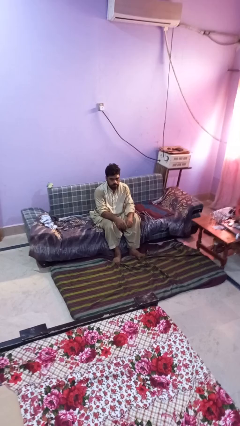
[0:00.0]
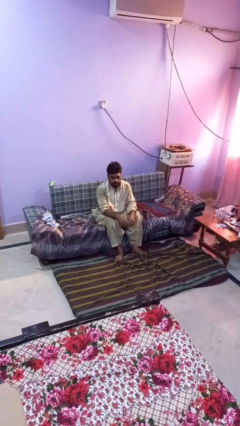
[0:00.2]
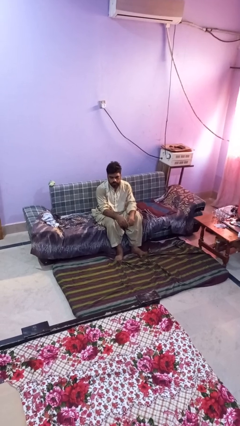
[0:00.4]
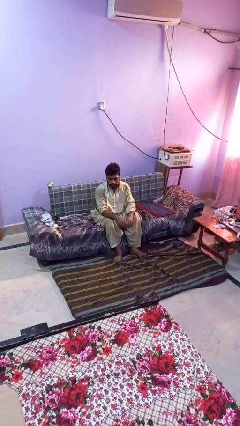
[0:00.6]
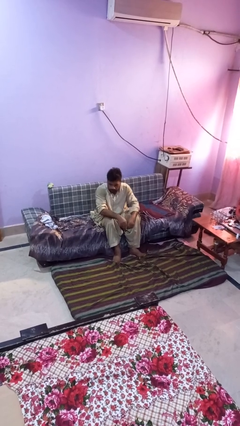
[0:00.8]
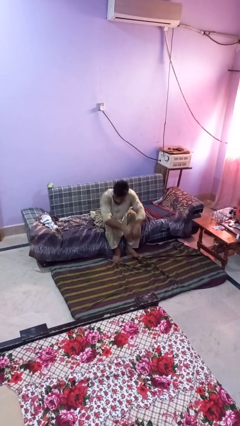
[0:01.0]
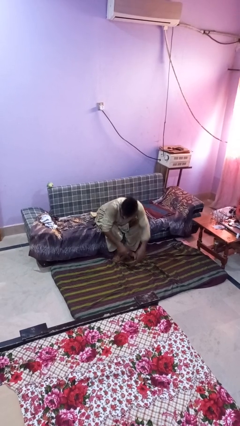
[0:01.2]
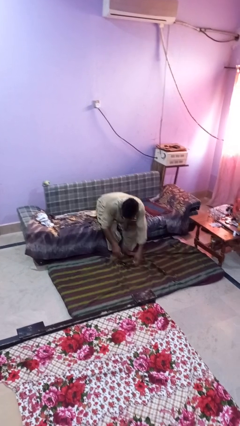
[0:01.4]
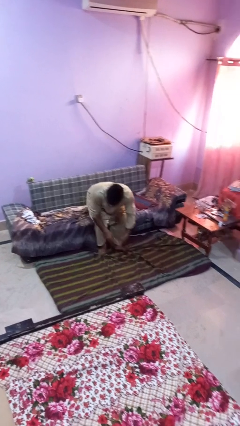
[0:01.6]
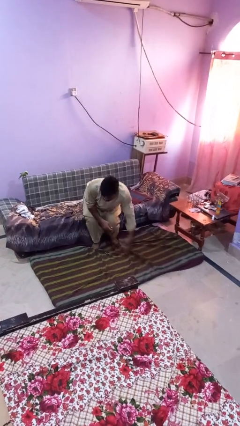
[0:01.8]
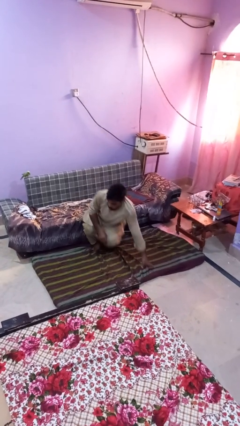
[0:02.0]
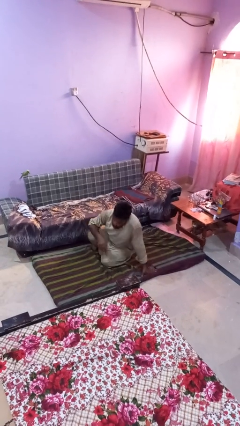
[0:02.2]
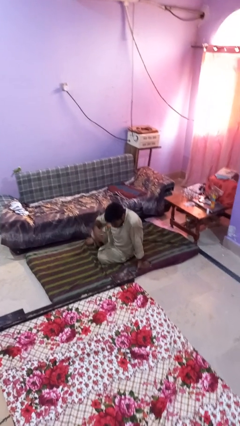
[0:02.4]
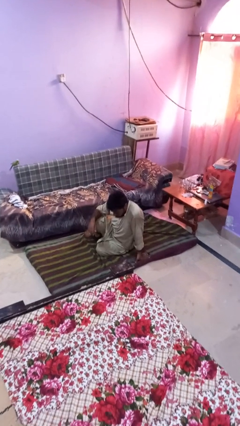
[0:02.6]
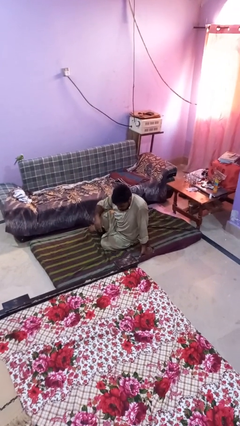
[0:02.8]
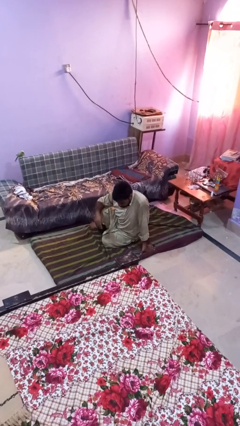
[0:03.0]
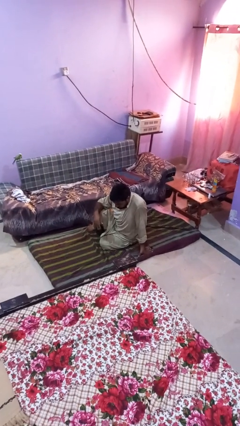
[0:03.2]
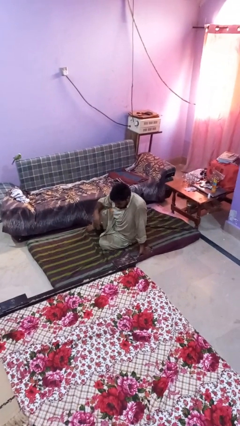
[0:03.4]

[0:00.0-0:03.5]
person falls from chair

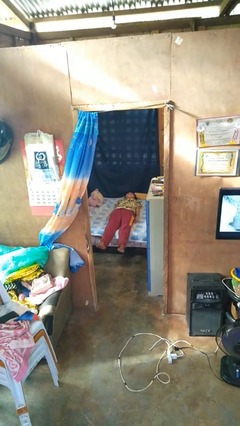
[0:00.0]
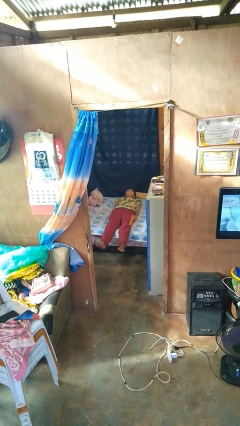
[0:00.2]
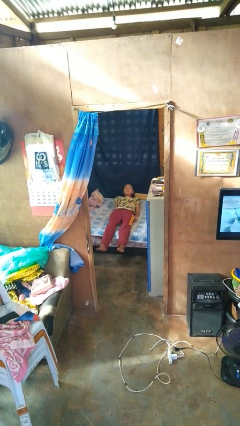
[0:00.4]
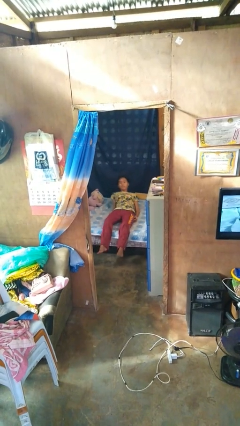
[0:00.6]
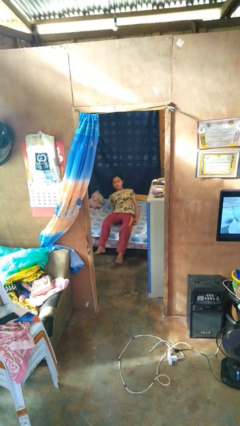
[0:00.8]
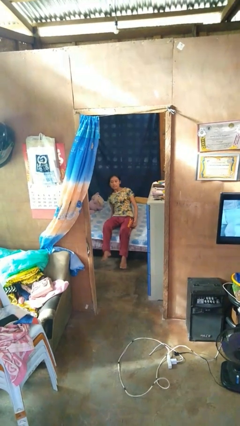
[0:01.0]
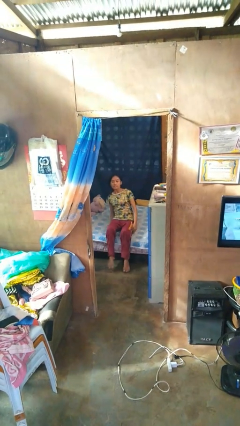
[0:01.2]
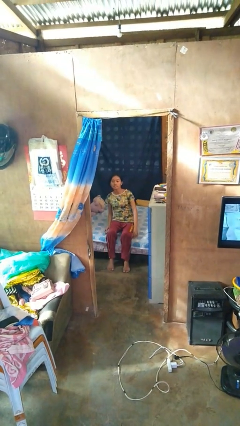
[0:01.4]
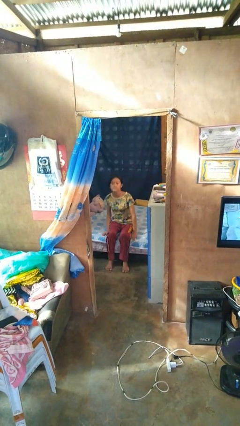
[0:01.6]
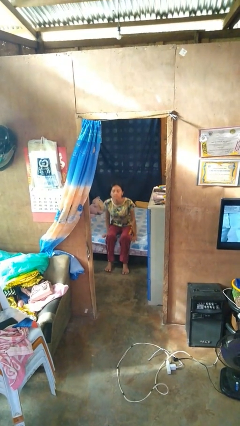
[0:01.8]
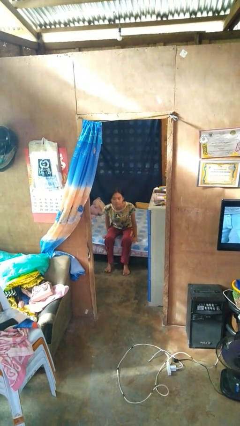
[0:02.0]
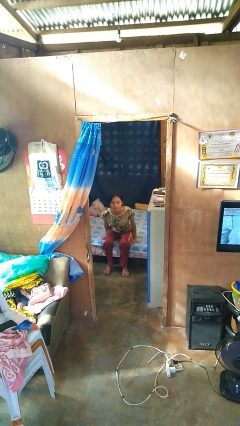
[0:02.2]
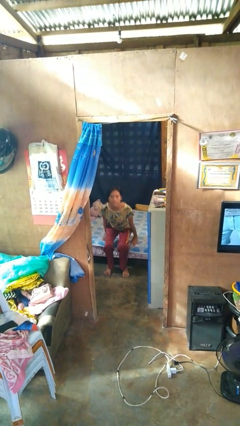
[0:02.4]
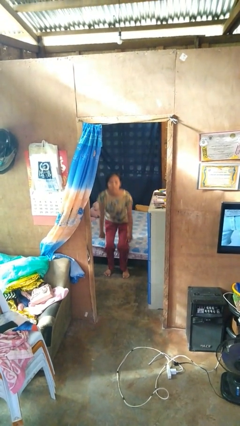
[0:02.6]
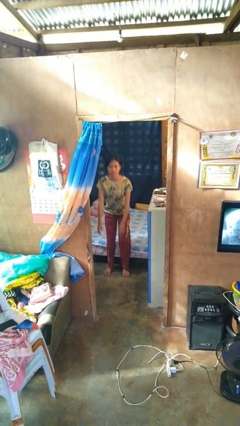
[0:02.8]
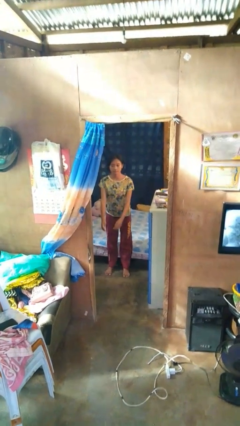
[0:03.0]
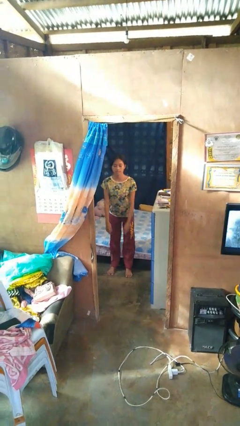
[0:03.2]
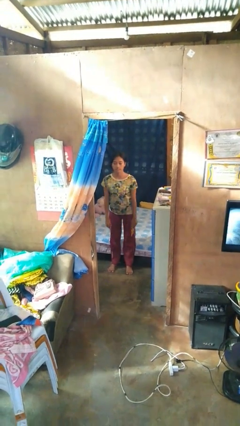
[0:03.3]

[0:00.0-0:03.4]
person stands up

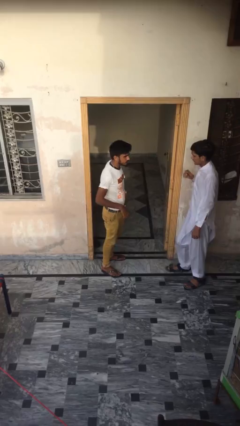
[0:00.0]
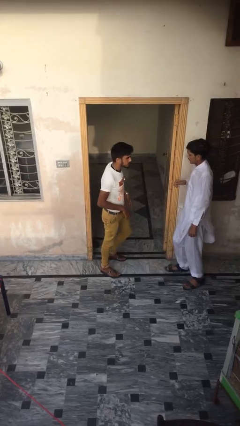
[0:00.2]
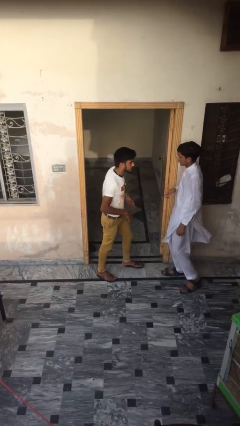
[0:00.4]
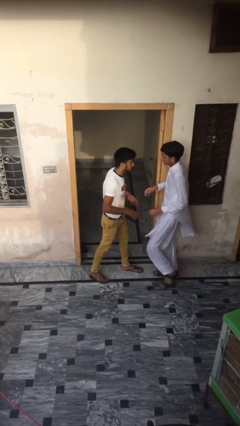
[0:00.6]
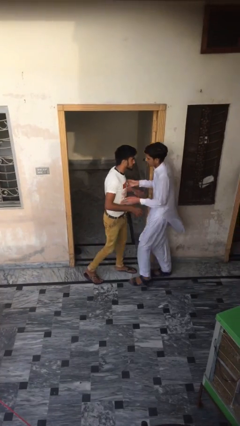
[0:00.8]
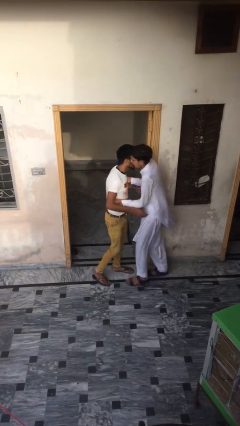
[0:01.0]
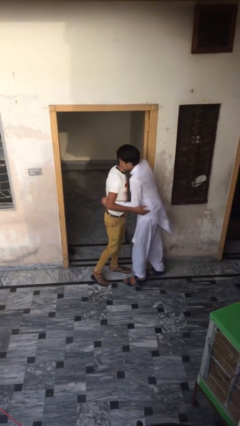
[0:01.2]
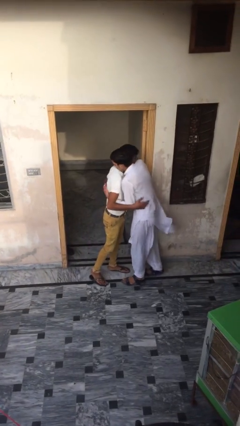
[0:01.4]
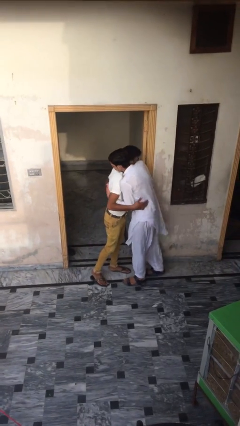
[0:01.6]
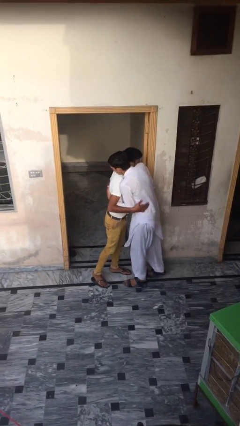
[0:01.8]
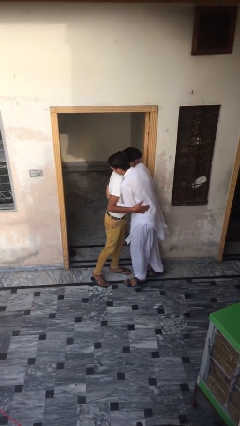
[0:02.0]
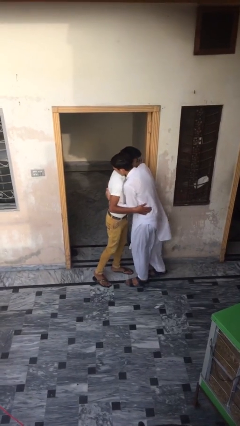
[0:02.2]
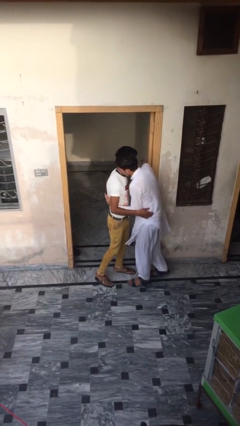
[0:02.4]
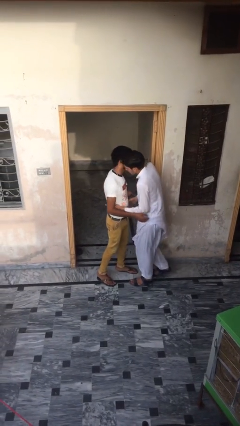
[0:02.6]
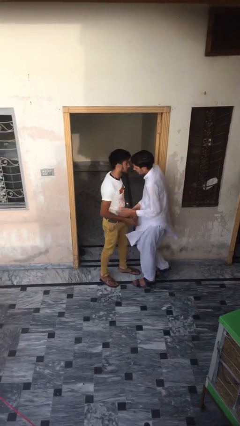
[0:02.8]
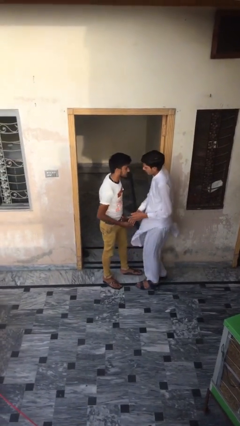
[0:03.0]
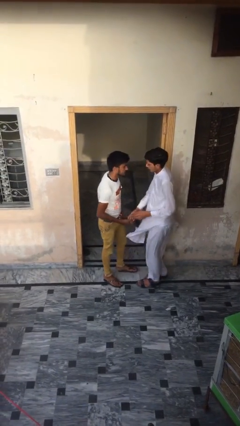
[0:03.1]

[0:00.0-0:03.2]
person embraces person

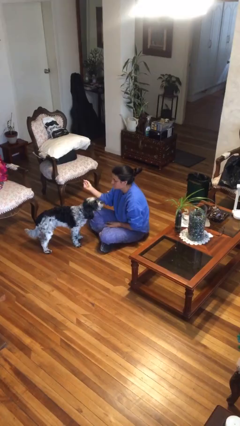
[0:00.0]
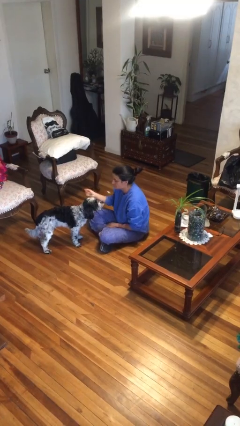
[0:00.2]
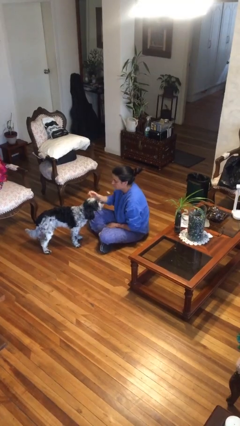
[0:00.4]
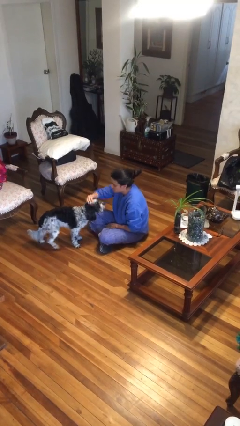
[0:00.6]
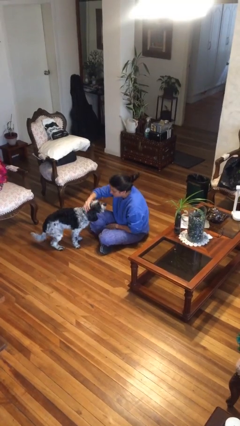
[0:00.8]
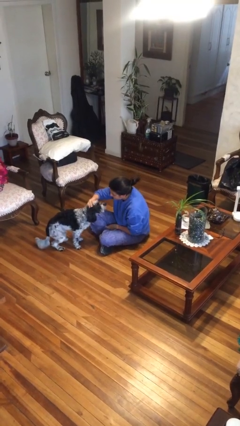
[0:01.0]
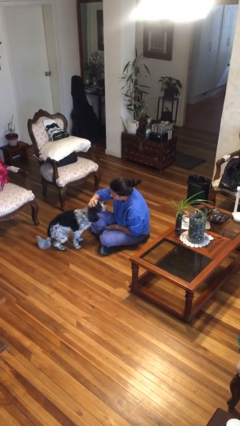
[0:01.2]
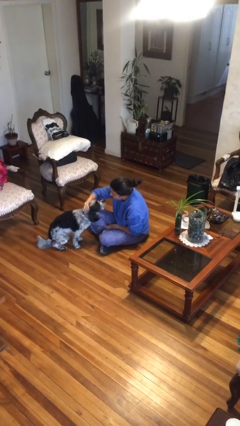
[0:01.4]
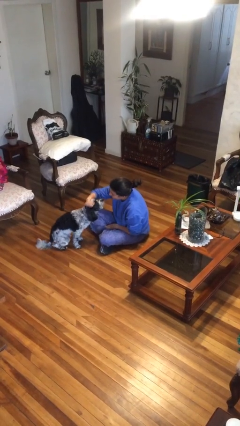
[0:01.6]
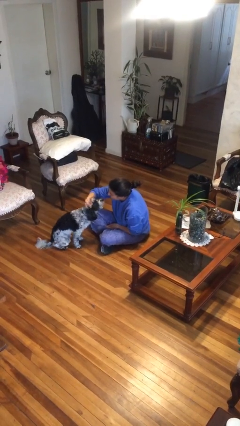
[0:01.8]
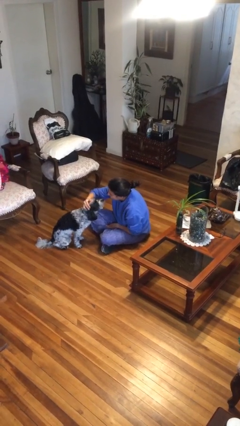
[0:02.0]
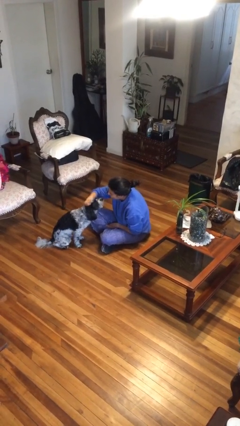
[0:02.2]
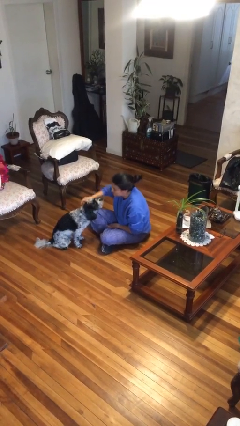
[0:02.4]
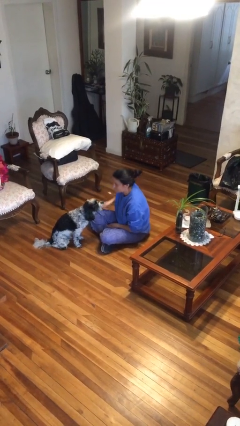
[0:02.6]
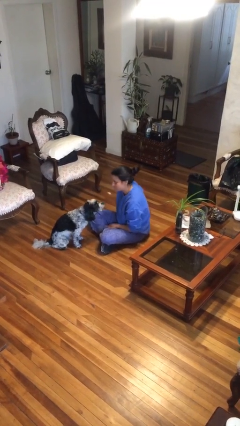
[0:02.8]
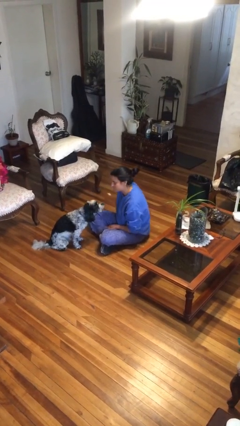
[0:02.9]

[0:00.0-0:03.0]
person pets dog

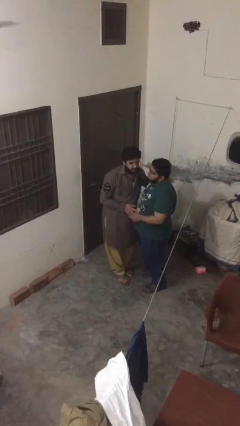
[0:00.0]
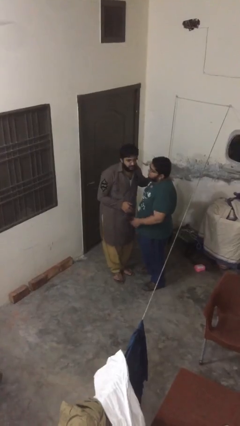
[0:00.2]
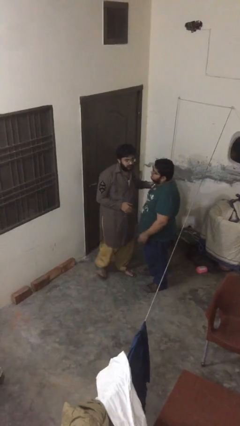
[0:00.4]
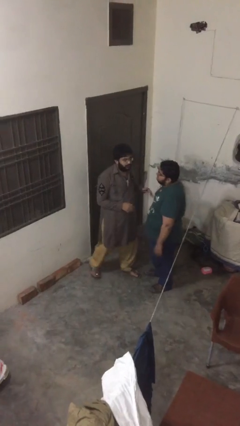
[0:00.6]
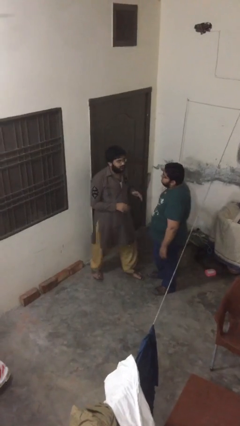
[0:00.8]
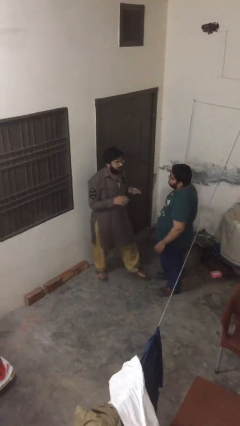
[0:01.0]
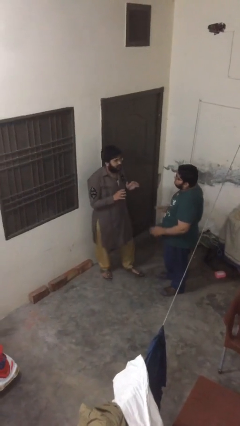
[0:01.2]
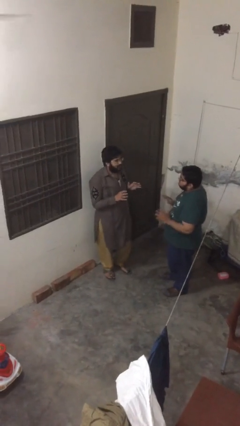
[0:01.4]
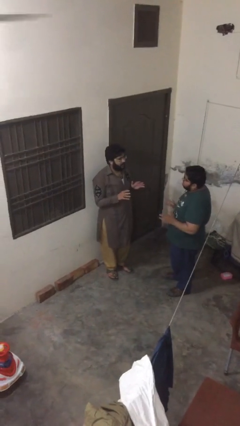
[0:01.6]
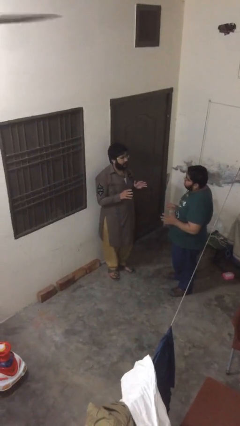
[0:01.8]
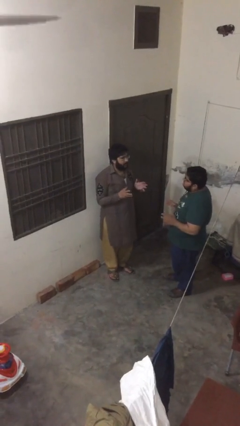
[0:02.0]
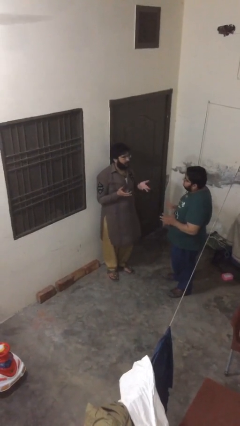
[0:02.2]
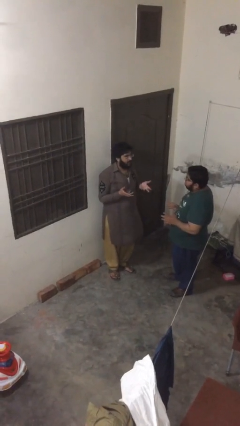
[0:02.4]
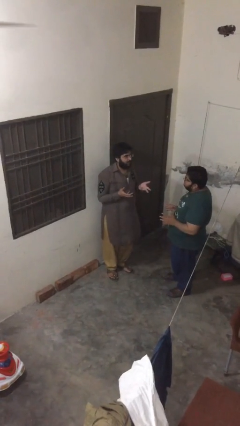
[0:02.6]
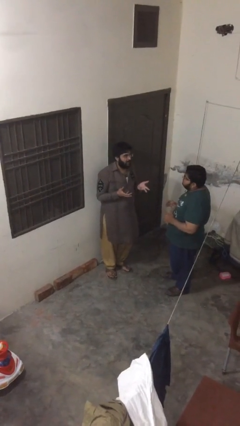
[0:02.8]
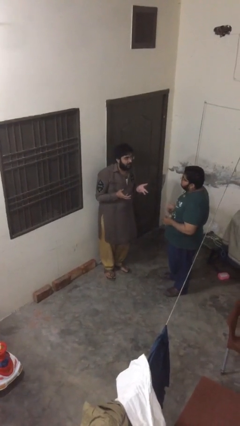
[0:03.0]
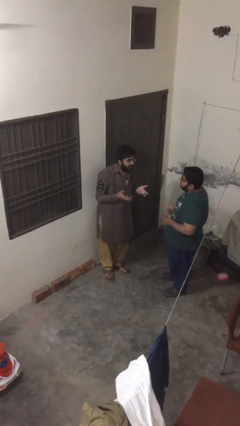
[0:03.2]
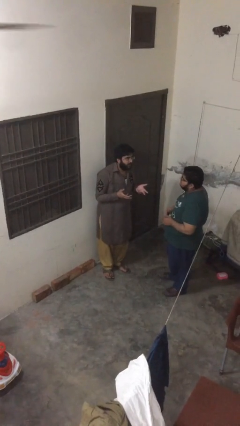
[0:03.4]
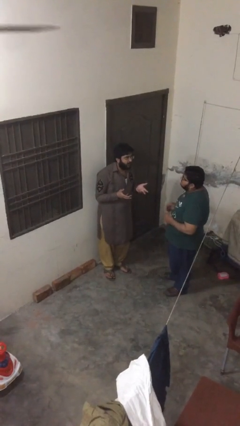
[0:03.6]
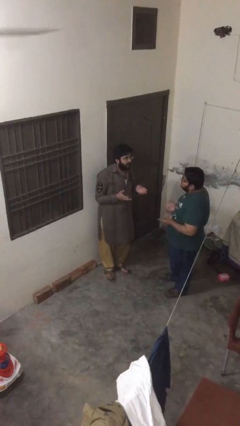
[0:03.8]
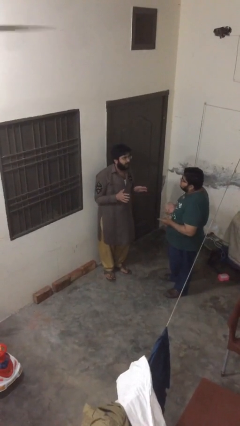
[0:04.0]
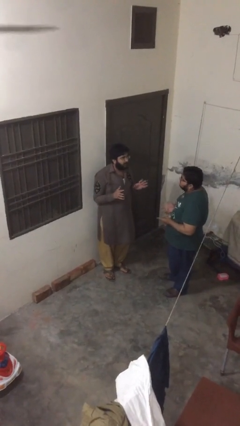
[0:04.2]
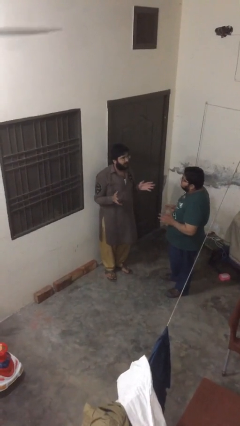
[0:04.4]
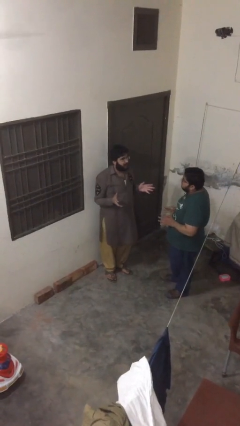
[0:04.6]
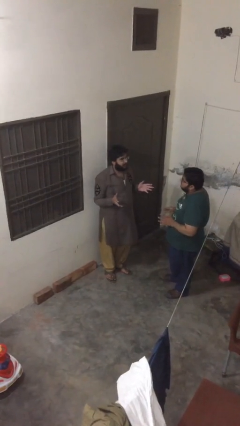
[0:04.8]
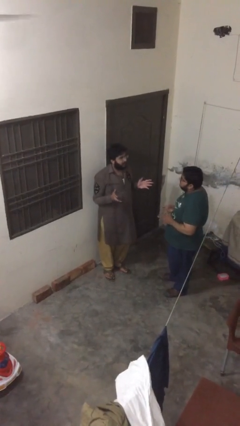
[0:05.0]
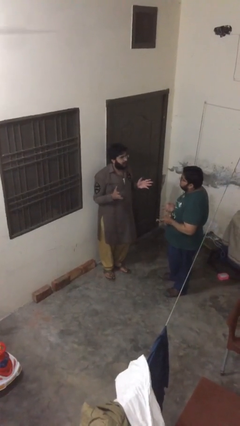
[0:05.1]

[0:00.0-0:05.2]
person talks to person
